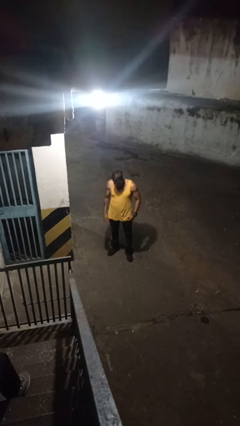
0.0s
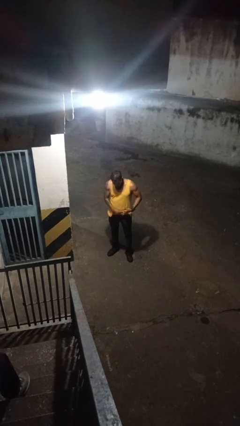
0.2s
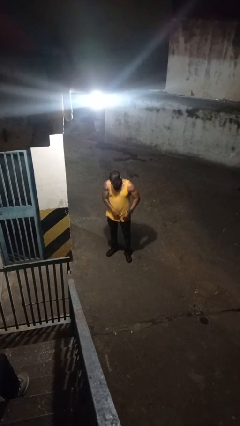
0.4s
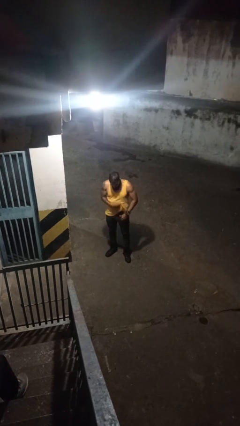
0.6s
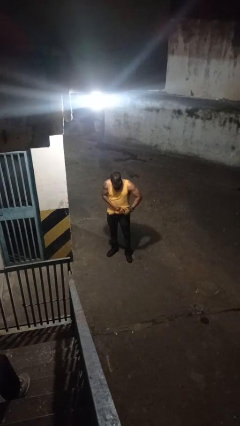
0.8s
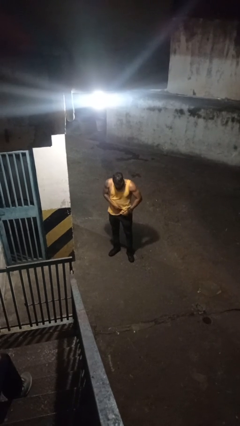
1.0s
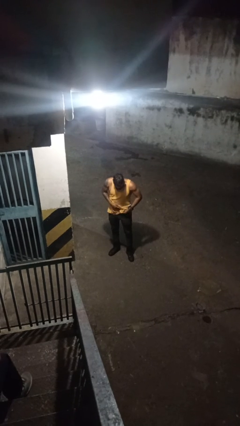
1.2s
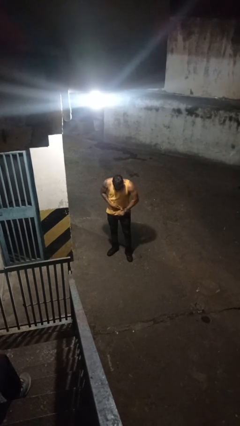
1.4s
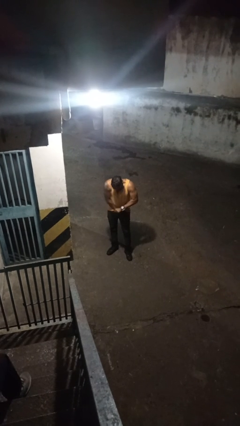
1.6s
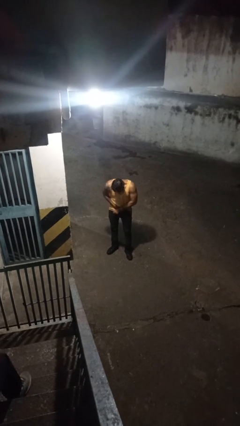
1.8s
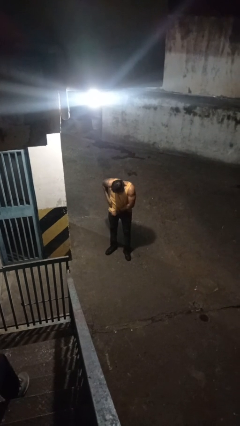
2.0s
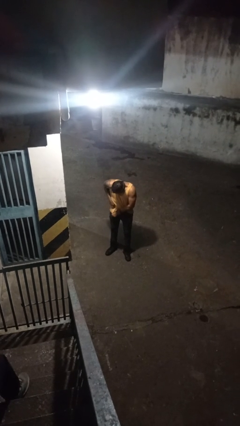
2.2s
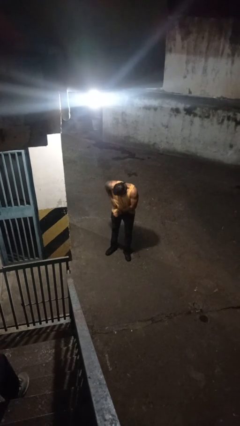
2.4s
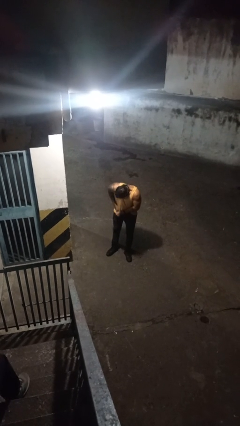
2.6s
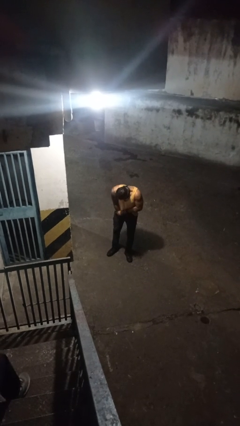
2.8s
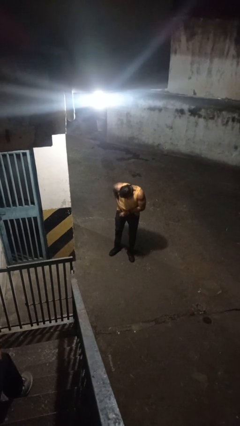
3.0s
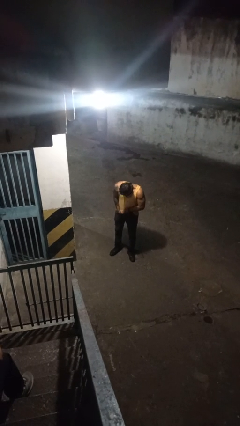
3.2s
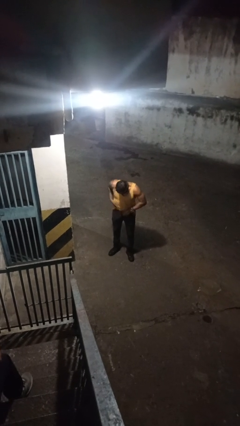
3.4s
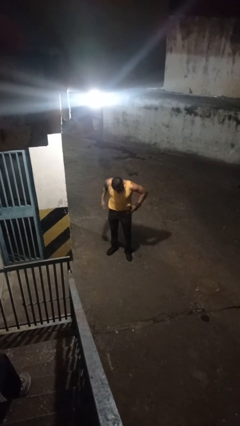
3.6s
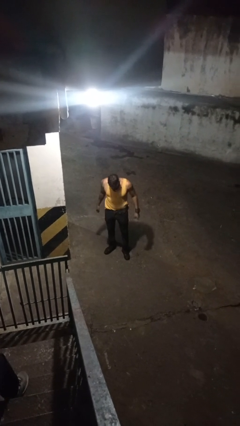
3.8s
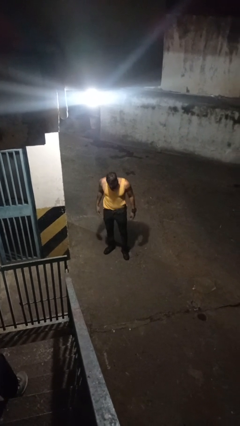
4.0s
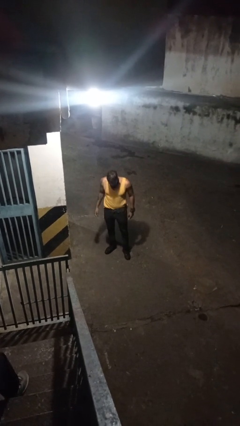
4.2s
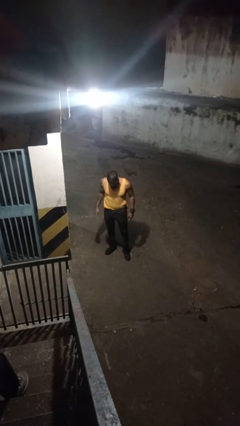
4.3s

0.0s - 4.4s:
person tucks in shirt

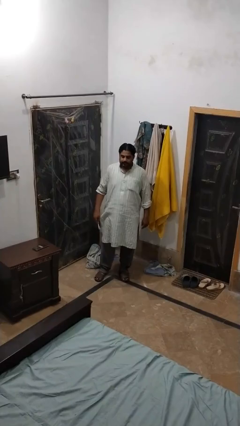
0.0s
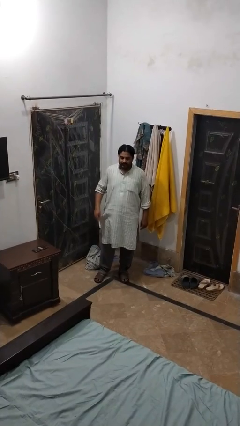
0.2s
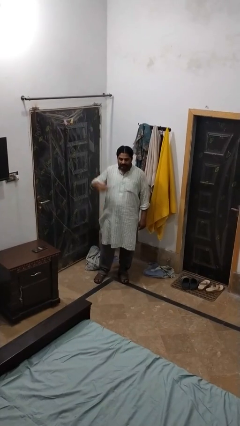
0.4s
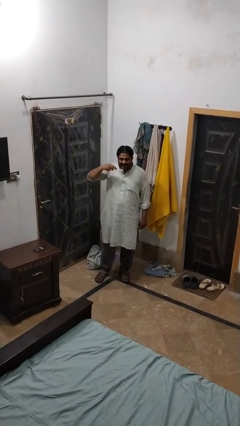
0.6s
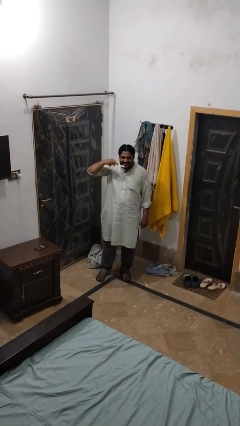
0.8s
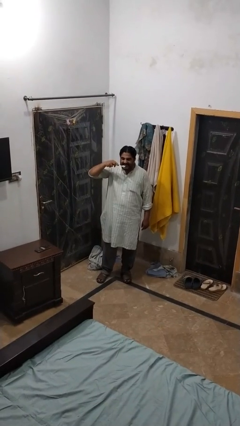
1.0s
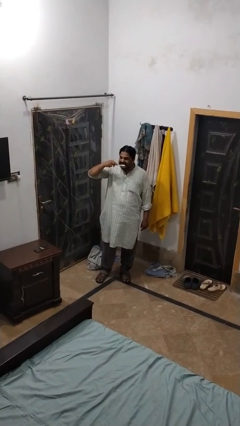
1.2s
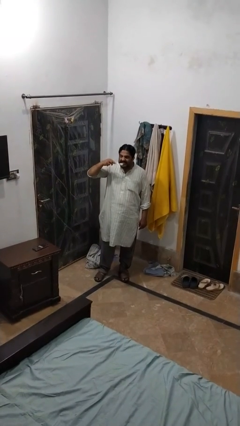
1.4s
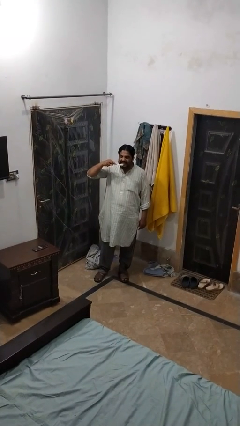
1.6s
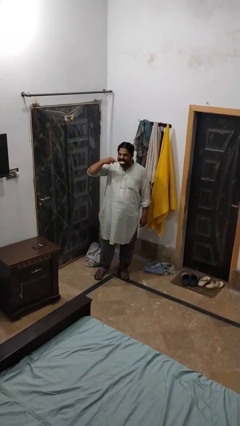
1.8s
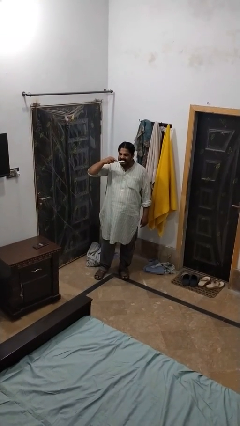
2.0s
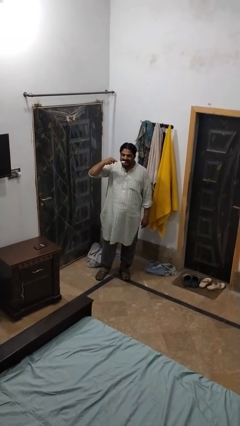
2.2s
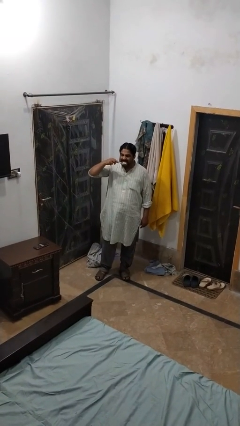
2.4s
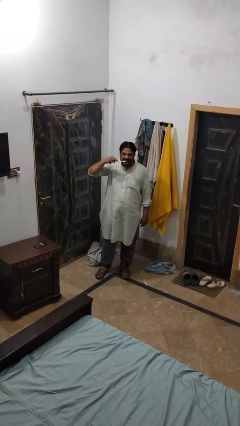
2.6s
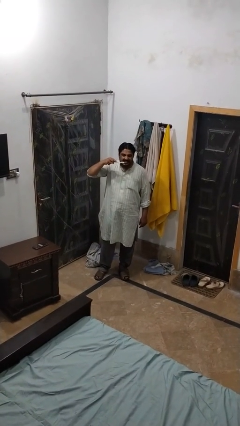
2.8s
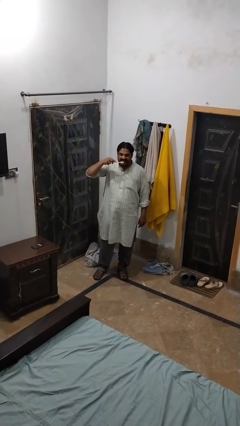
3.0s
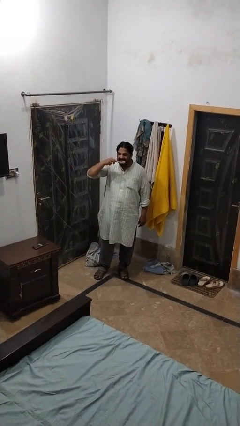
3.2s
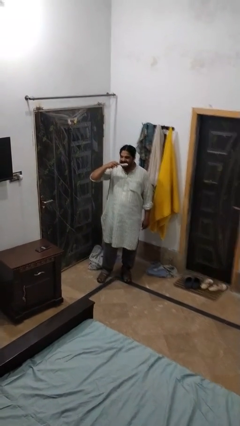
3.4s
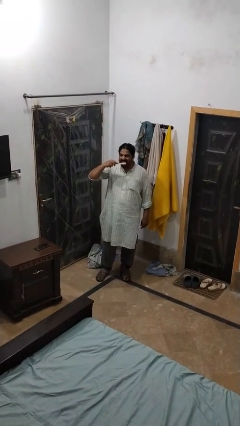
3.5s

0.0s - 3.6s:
person brushes teeth

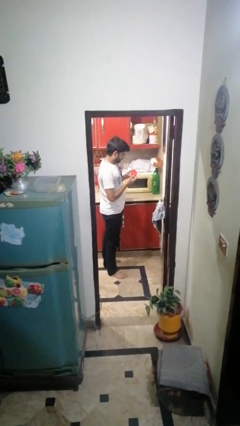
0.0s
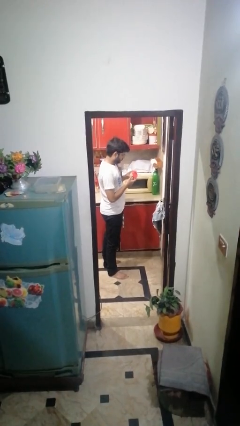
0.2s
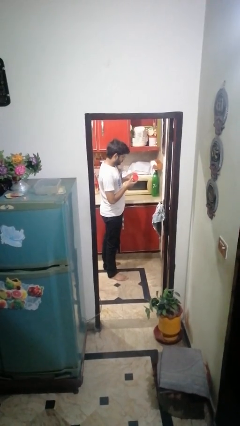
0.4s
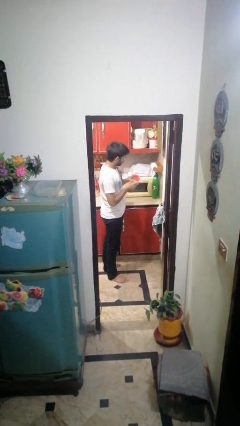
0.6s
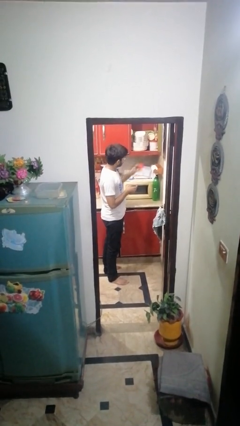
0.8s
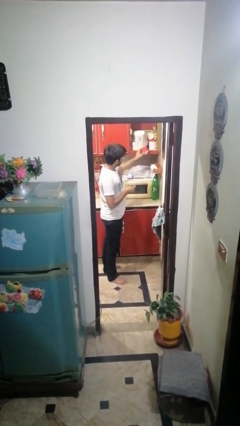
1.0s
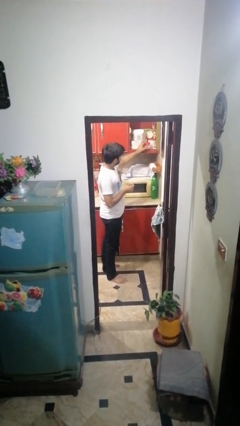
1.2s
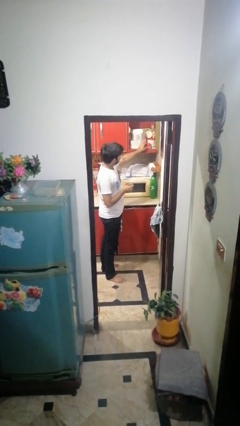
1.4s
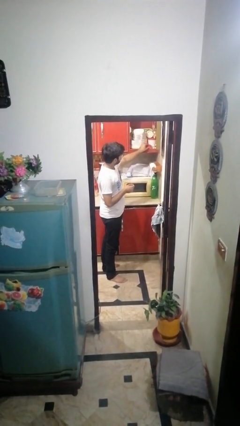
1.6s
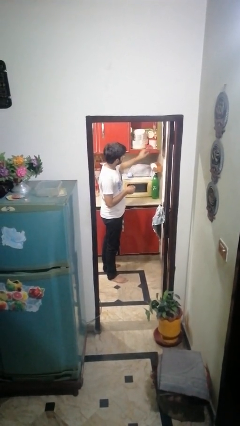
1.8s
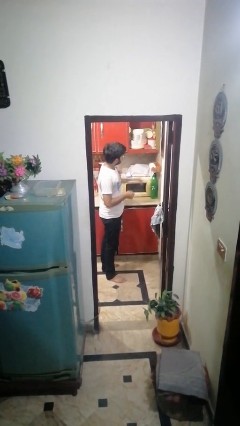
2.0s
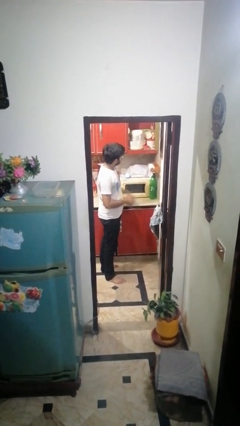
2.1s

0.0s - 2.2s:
person puts down object into cabinet

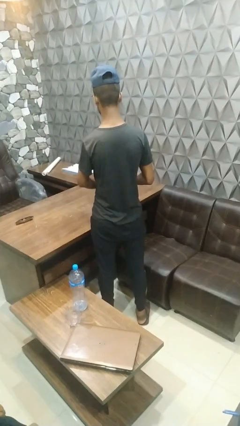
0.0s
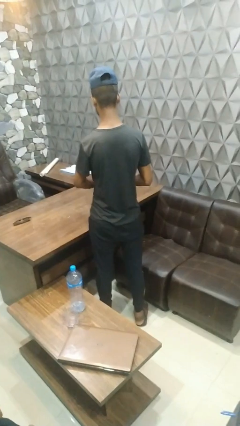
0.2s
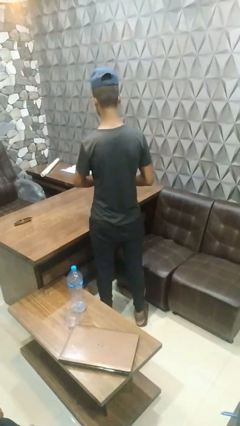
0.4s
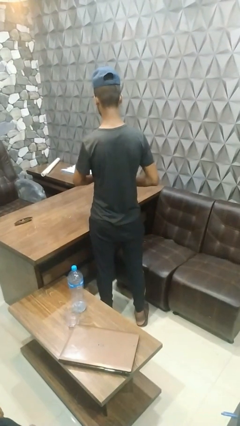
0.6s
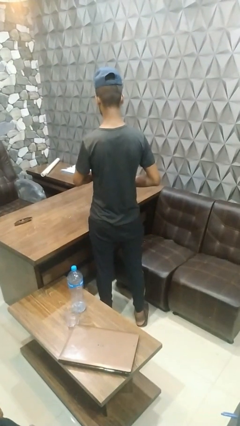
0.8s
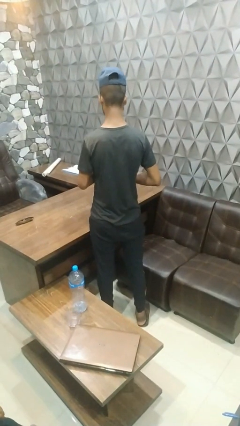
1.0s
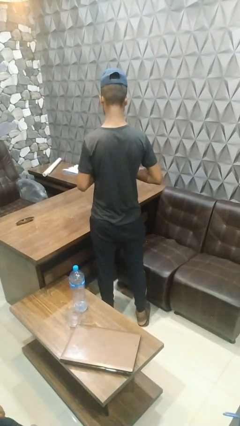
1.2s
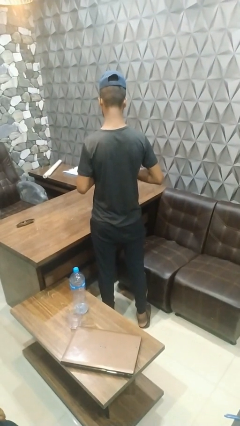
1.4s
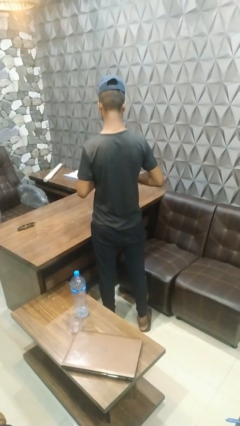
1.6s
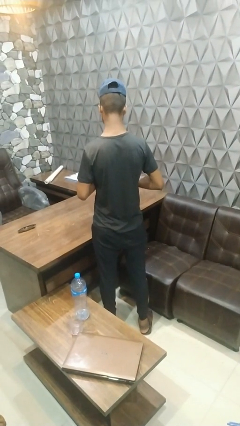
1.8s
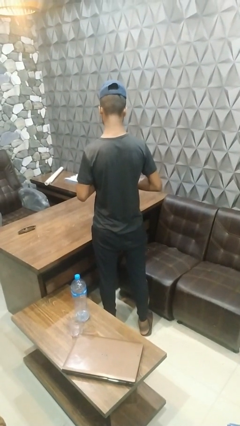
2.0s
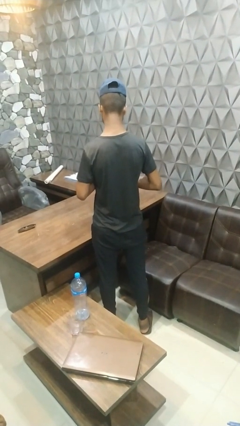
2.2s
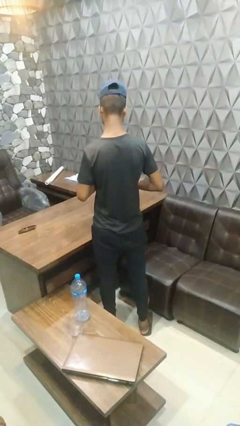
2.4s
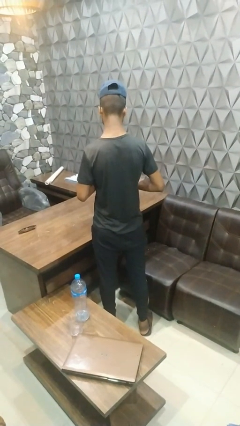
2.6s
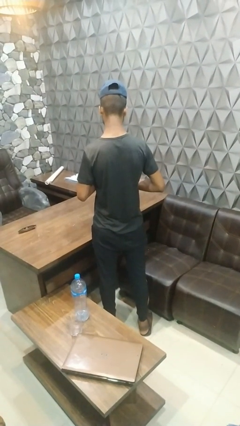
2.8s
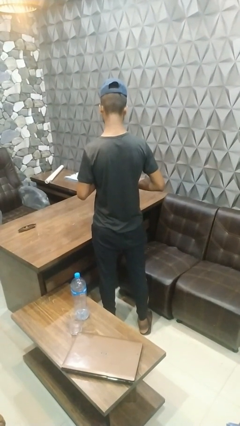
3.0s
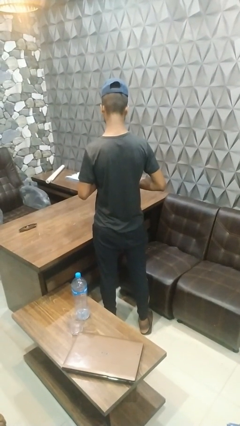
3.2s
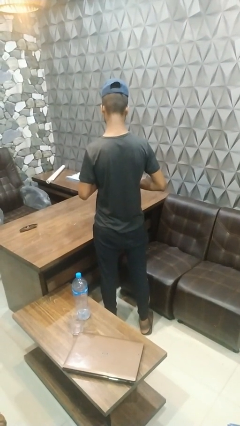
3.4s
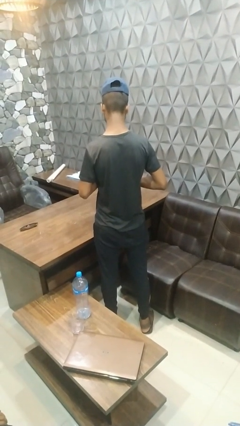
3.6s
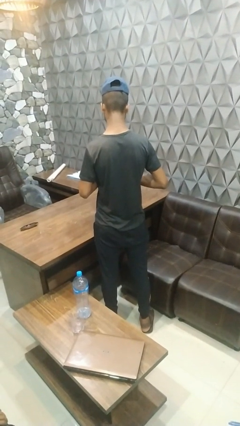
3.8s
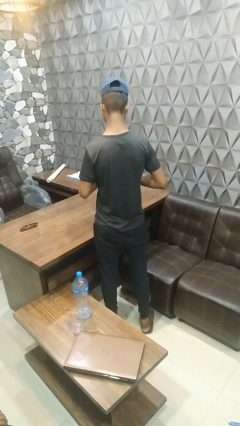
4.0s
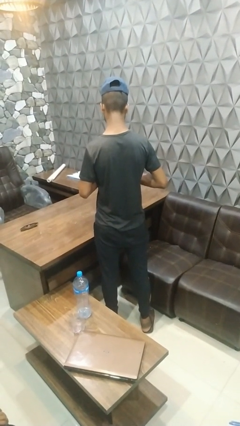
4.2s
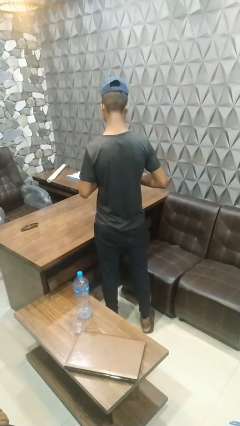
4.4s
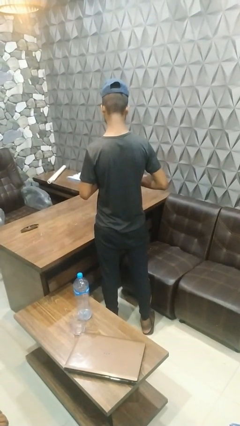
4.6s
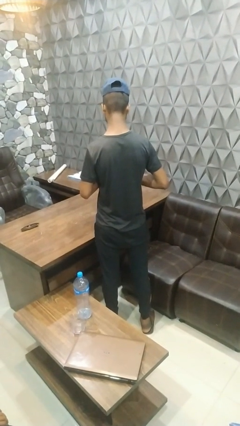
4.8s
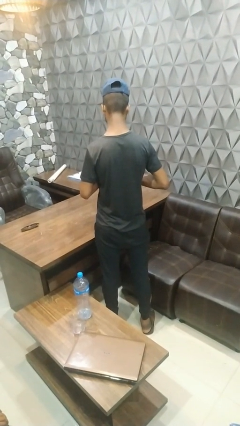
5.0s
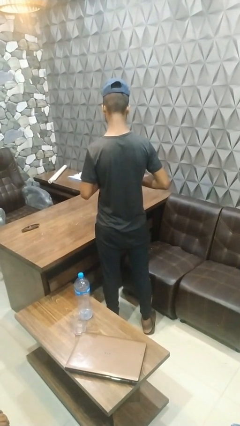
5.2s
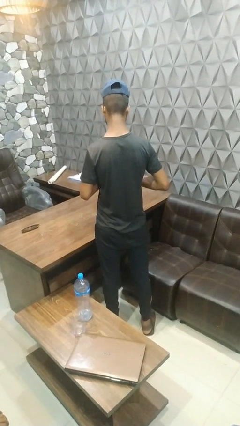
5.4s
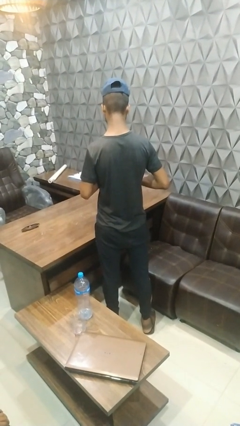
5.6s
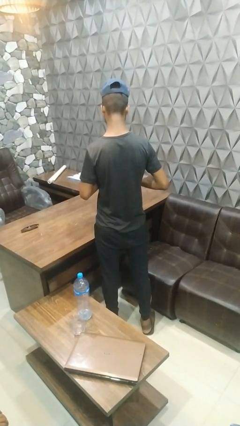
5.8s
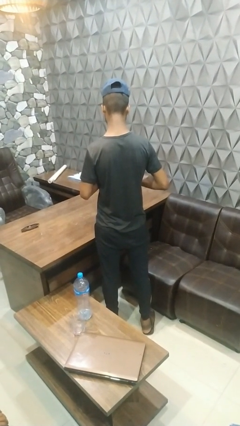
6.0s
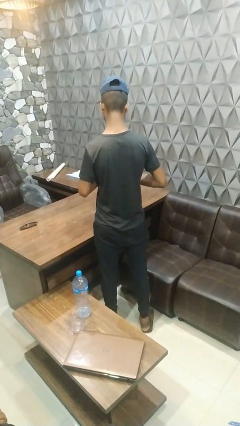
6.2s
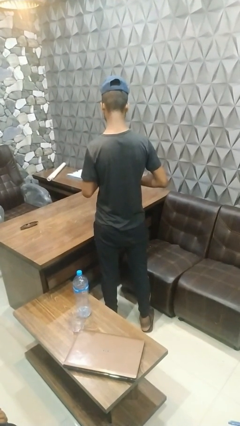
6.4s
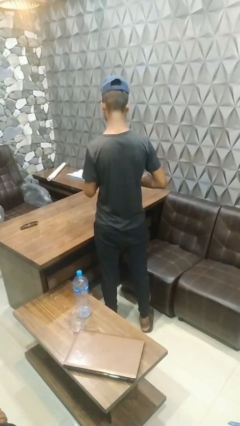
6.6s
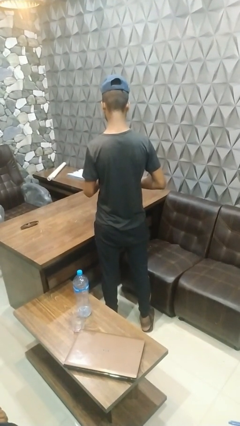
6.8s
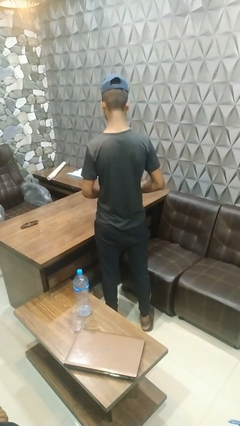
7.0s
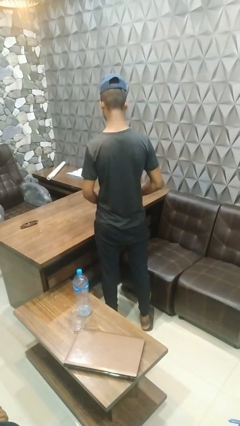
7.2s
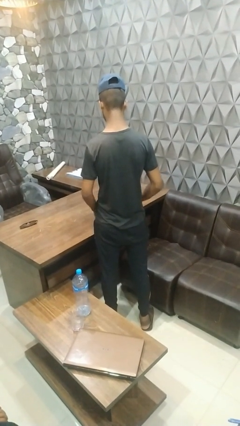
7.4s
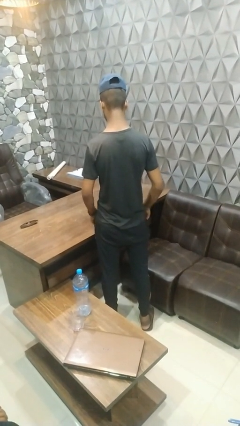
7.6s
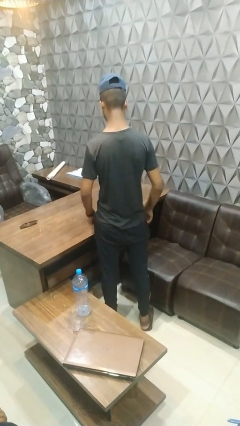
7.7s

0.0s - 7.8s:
person puts on wristwatch
